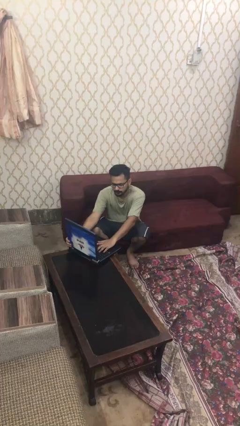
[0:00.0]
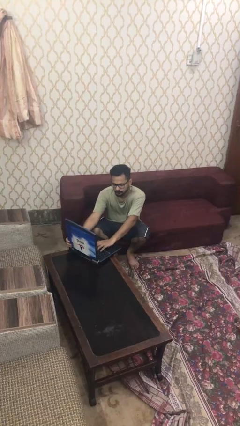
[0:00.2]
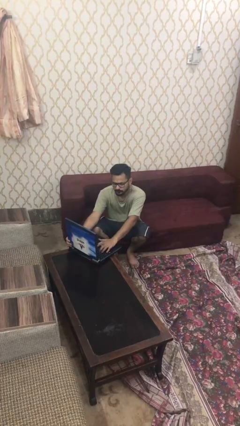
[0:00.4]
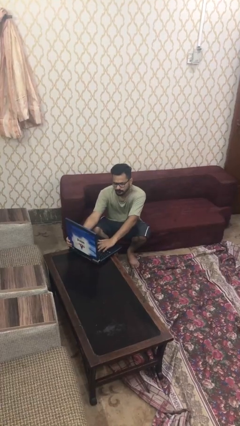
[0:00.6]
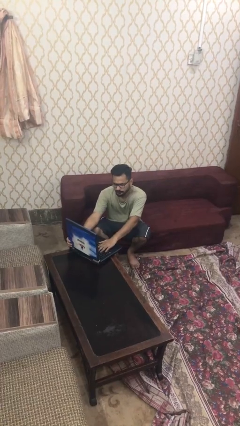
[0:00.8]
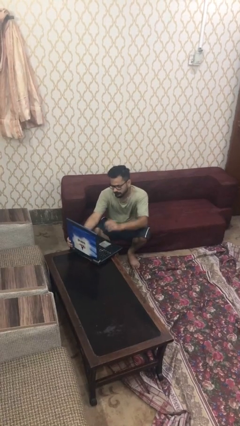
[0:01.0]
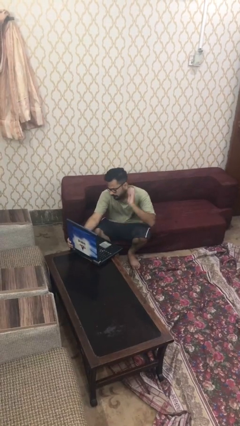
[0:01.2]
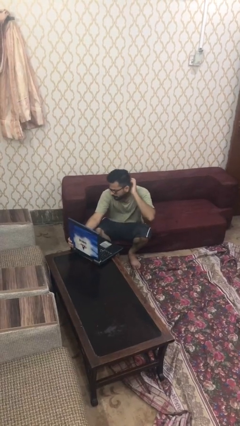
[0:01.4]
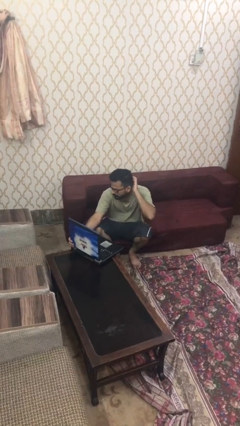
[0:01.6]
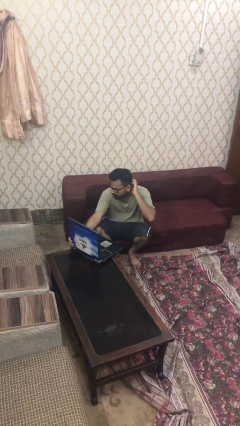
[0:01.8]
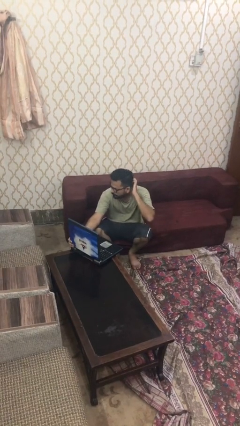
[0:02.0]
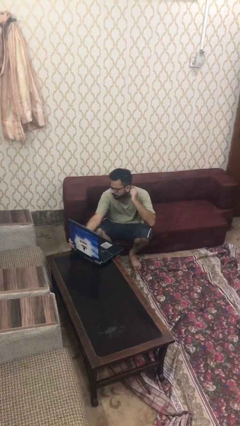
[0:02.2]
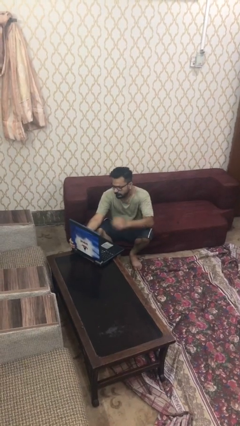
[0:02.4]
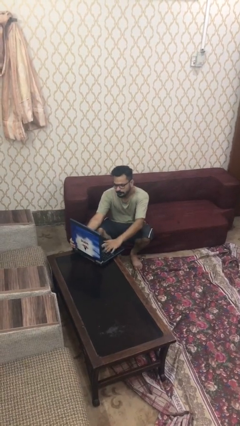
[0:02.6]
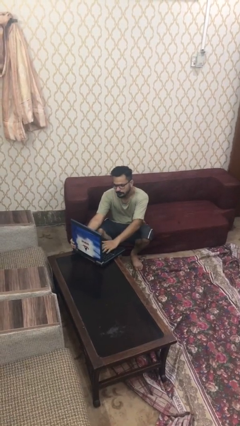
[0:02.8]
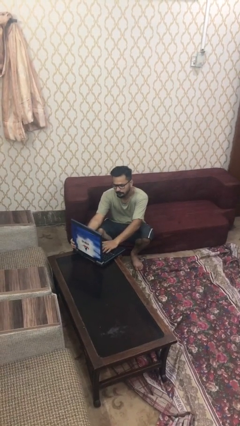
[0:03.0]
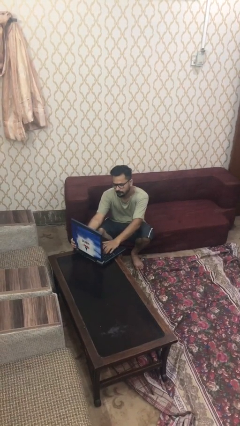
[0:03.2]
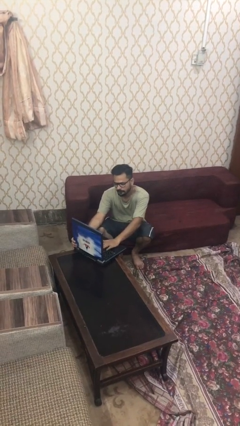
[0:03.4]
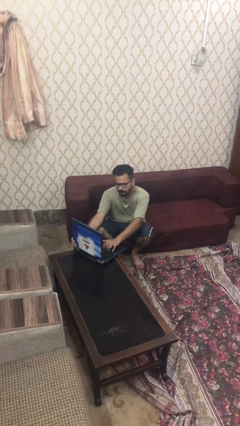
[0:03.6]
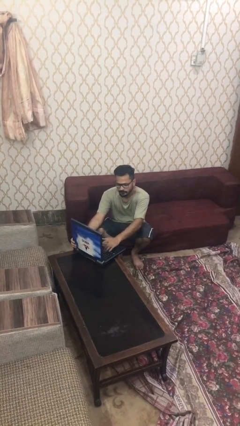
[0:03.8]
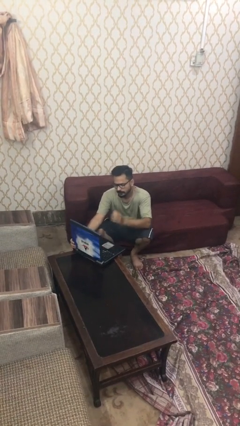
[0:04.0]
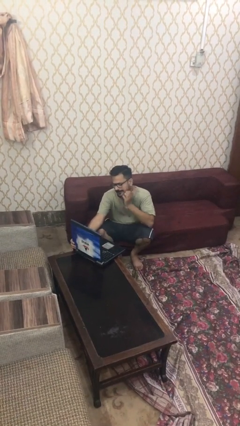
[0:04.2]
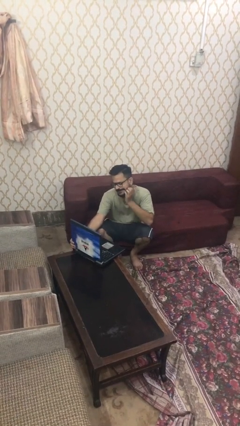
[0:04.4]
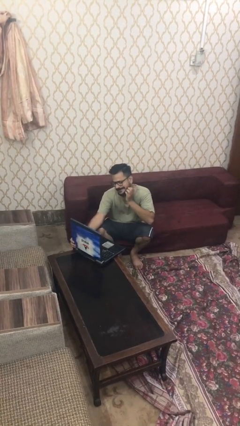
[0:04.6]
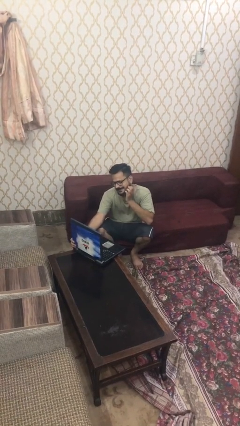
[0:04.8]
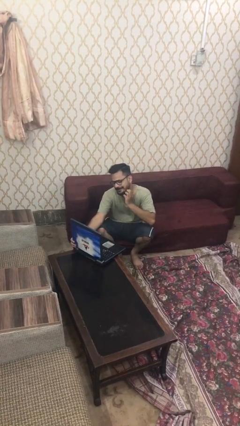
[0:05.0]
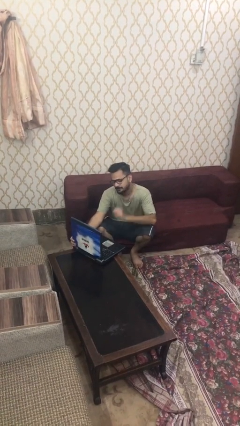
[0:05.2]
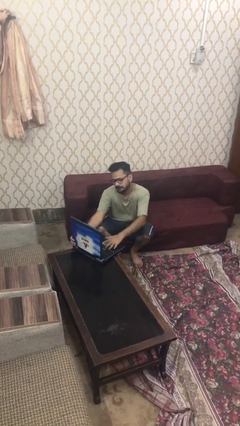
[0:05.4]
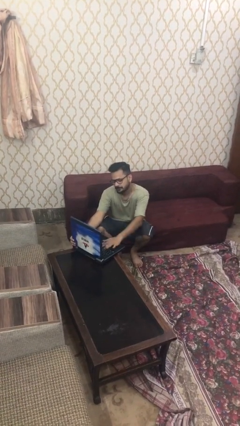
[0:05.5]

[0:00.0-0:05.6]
person interacts with laptop

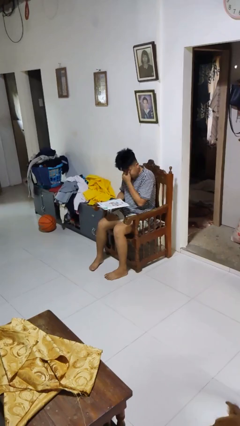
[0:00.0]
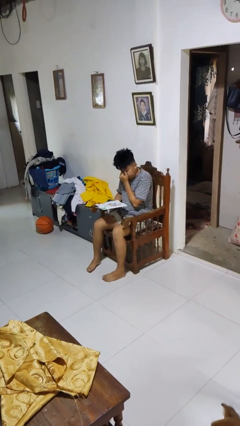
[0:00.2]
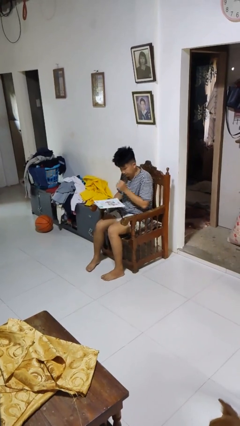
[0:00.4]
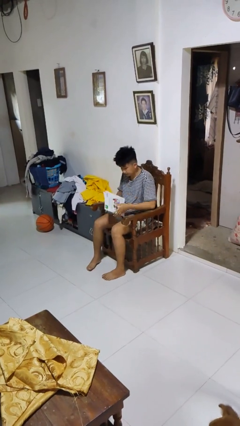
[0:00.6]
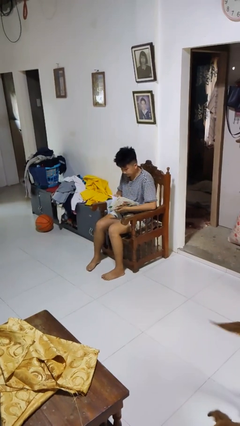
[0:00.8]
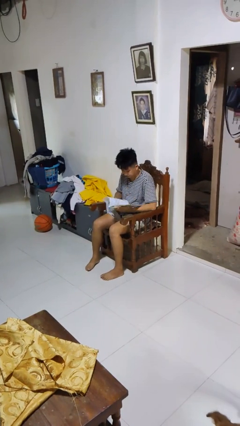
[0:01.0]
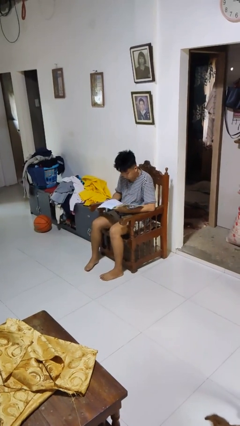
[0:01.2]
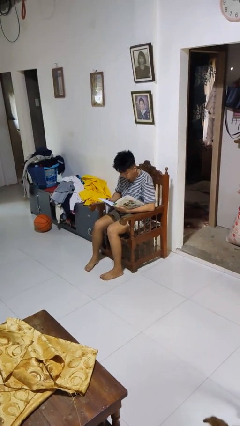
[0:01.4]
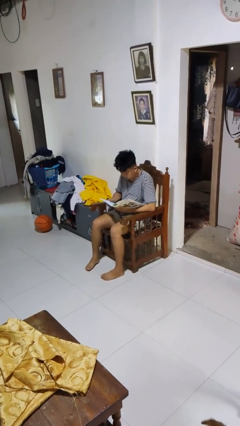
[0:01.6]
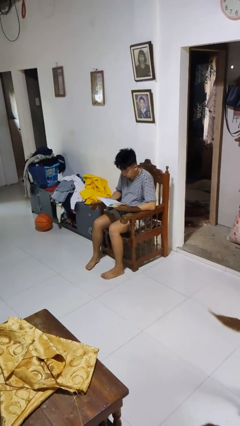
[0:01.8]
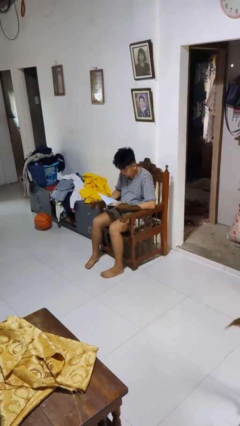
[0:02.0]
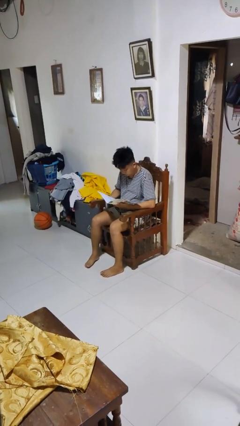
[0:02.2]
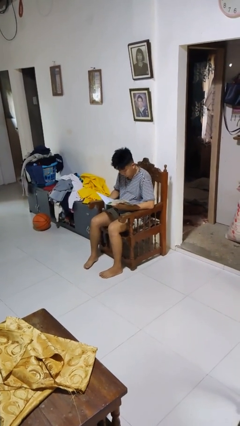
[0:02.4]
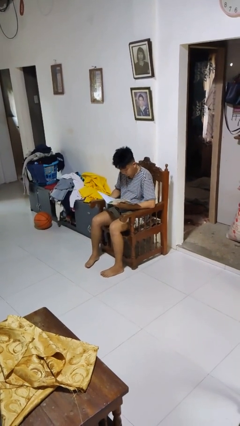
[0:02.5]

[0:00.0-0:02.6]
person reads magazine

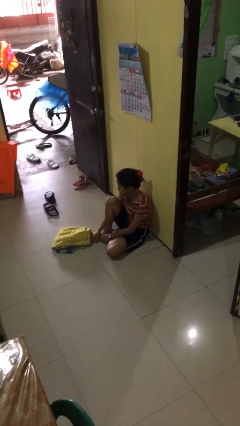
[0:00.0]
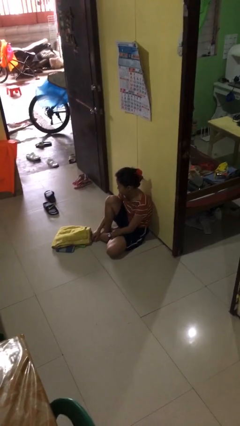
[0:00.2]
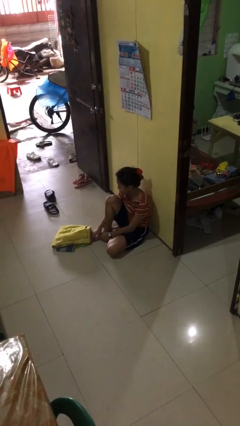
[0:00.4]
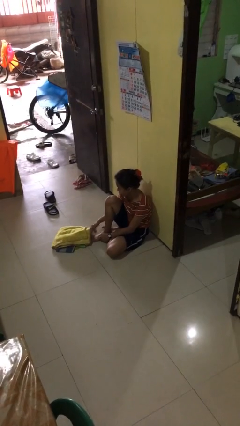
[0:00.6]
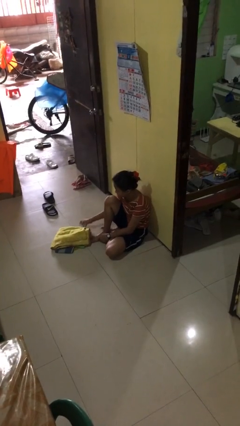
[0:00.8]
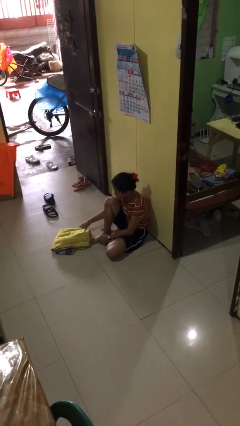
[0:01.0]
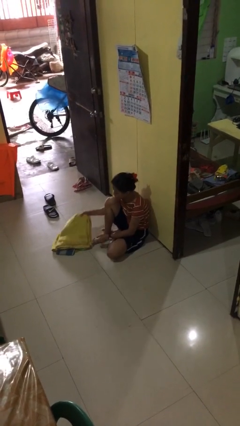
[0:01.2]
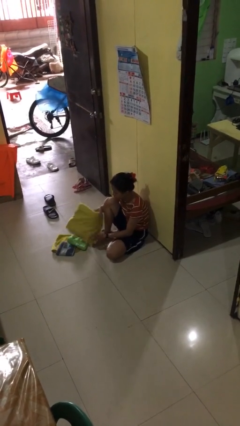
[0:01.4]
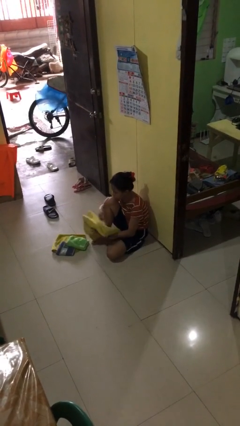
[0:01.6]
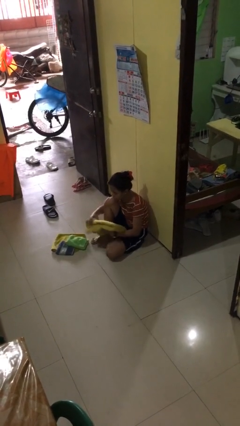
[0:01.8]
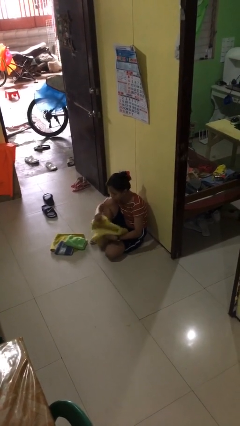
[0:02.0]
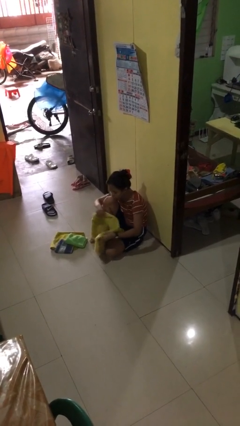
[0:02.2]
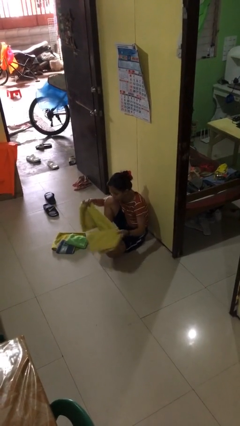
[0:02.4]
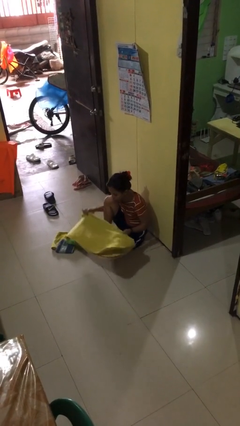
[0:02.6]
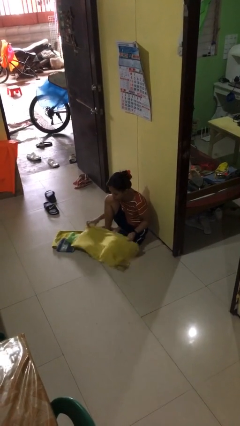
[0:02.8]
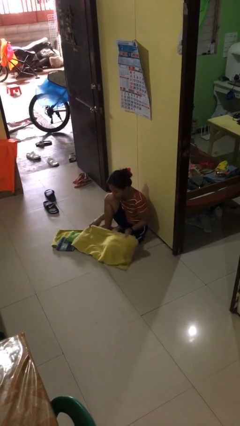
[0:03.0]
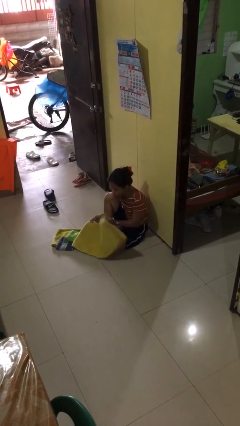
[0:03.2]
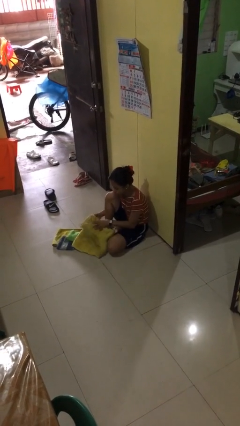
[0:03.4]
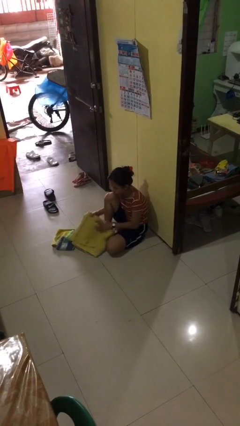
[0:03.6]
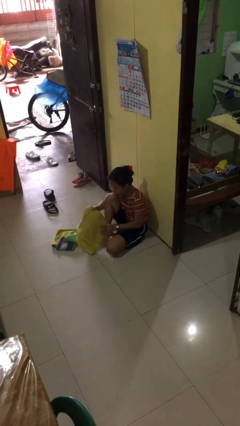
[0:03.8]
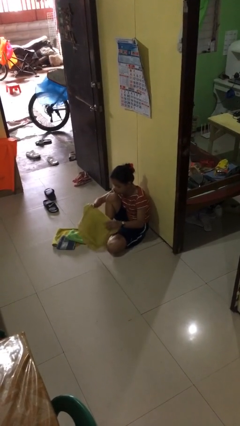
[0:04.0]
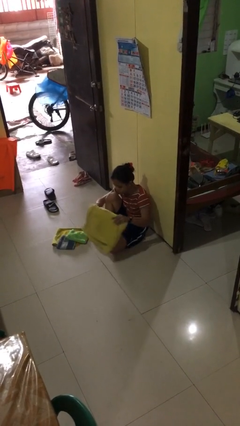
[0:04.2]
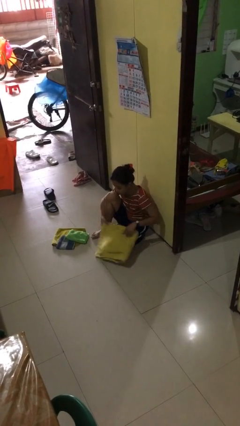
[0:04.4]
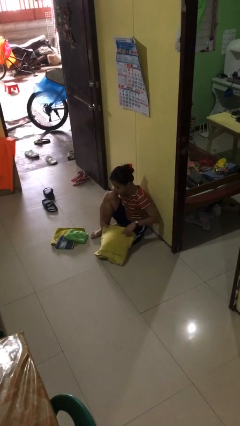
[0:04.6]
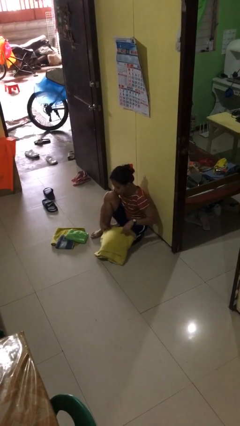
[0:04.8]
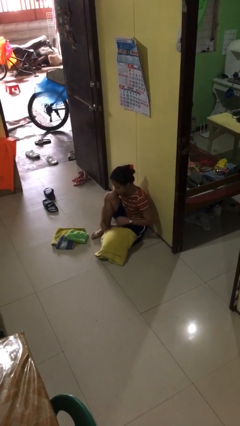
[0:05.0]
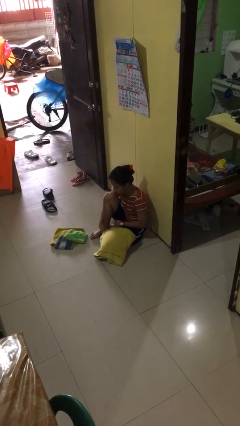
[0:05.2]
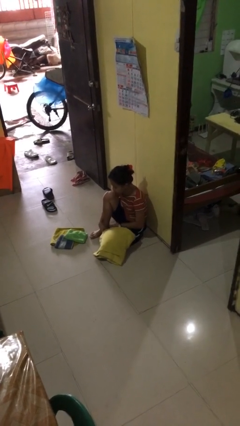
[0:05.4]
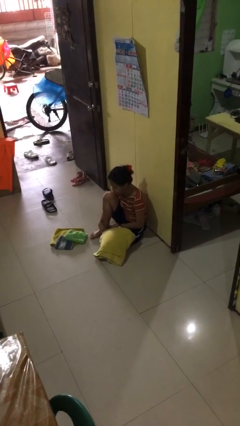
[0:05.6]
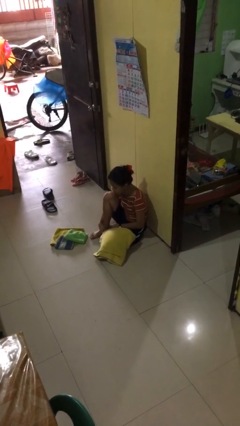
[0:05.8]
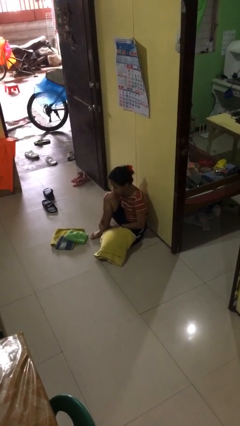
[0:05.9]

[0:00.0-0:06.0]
person folds towel

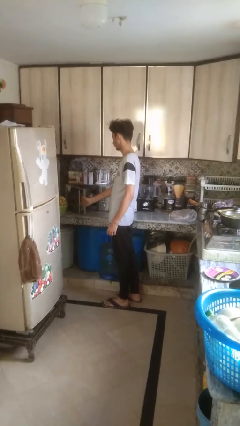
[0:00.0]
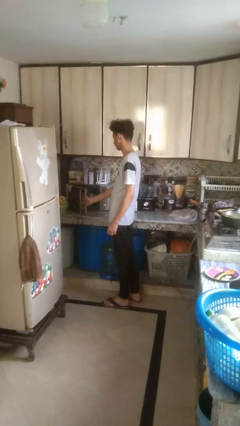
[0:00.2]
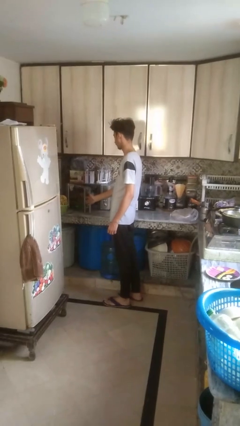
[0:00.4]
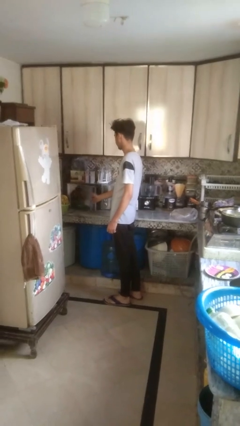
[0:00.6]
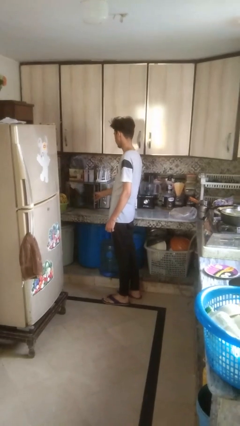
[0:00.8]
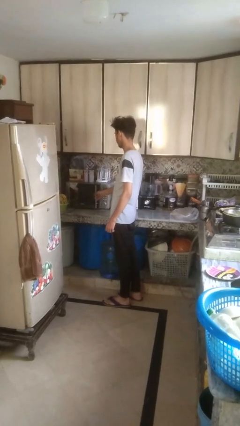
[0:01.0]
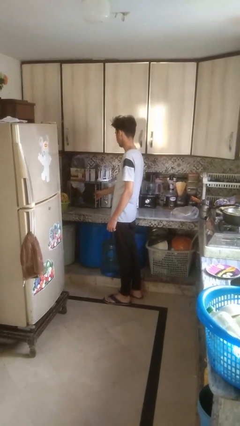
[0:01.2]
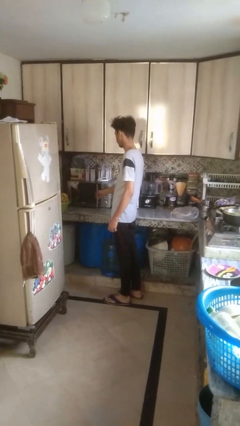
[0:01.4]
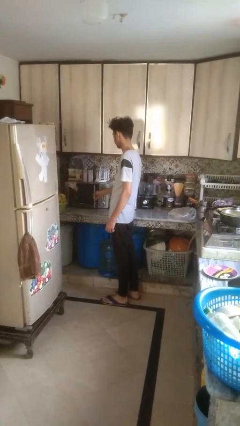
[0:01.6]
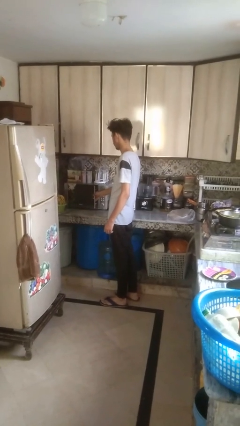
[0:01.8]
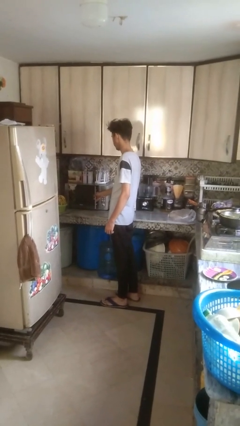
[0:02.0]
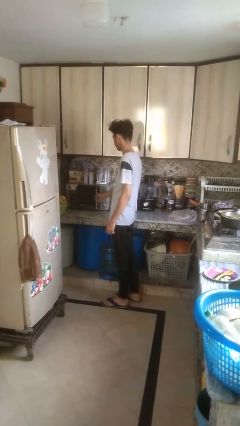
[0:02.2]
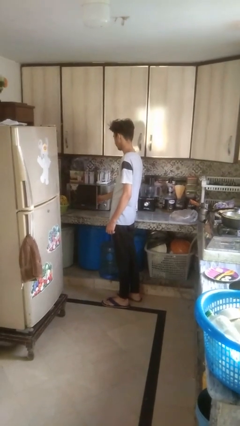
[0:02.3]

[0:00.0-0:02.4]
person closes oven door

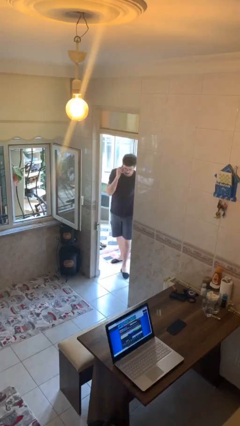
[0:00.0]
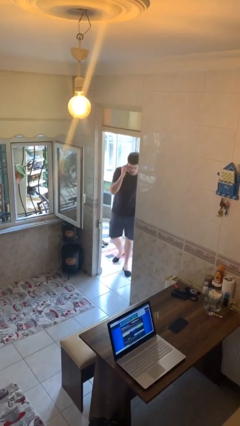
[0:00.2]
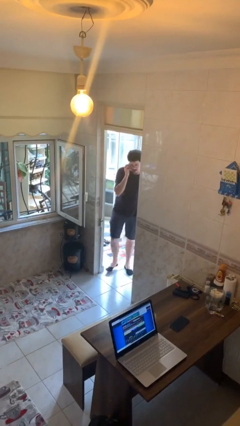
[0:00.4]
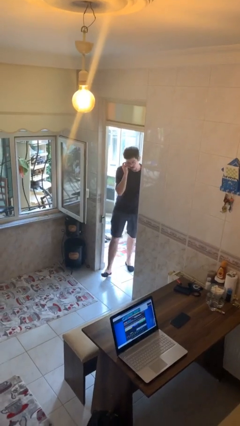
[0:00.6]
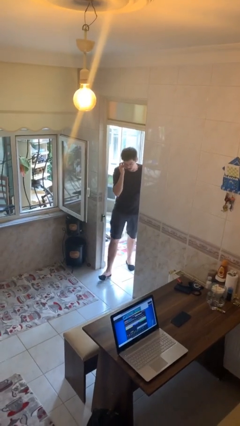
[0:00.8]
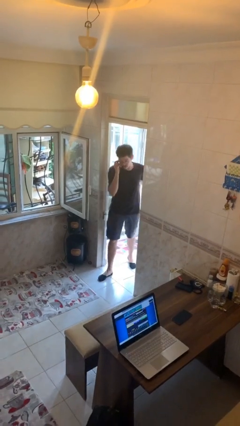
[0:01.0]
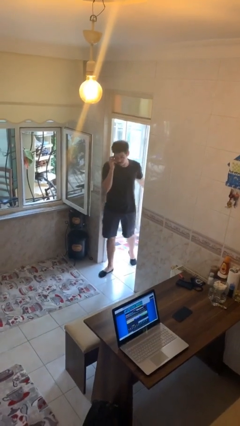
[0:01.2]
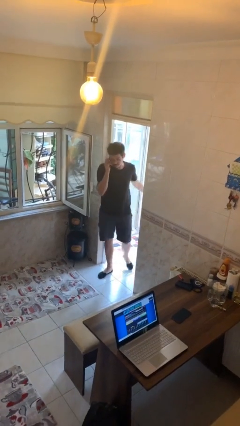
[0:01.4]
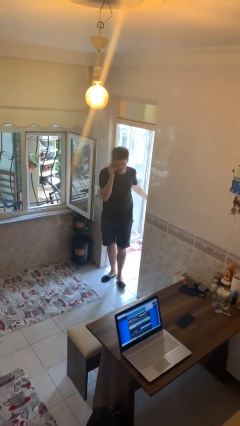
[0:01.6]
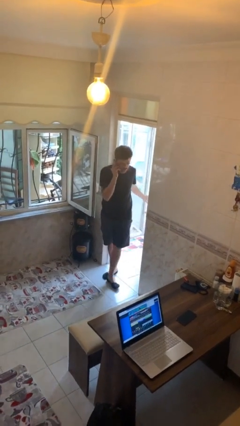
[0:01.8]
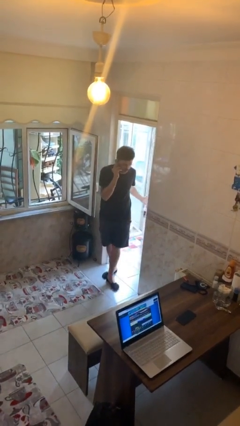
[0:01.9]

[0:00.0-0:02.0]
person enters scene through structure
